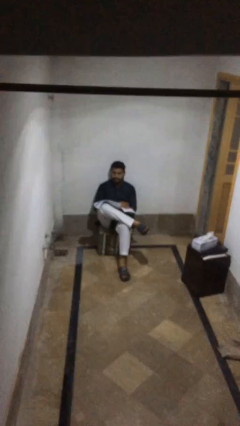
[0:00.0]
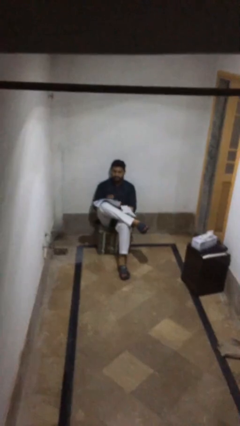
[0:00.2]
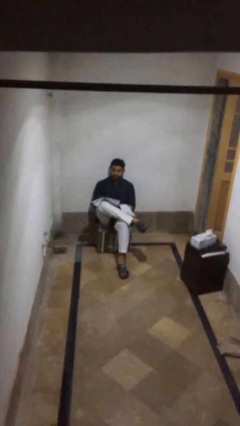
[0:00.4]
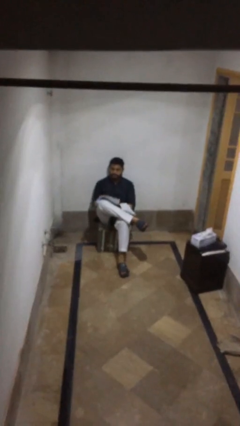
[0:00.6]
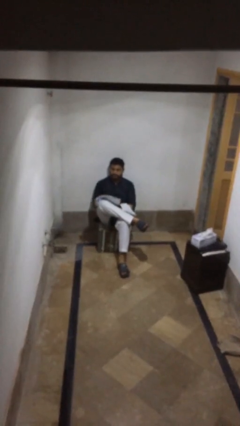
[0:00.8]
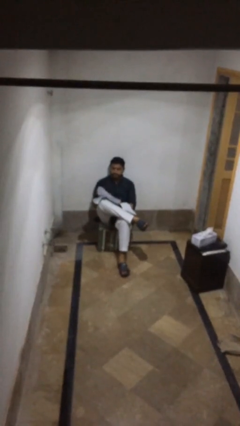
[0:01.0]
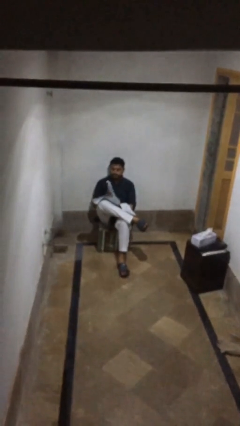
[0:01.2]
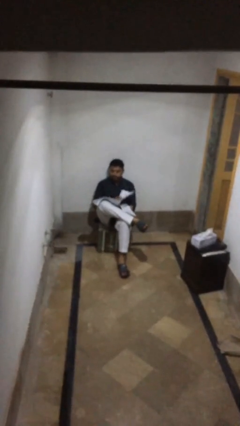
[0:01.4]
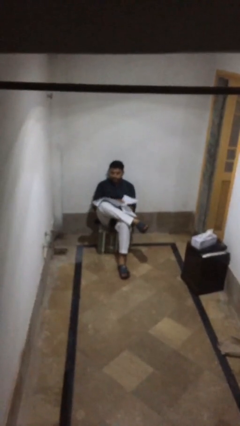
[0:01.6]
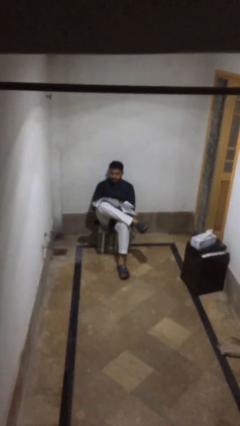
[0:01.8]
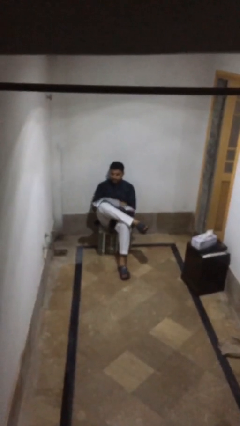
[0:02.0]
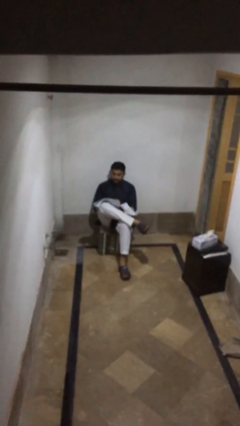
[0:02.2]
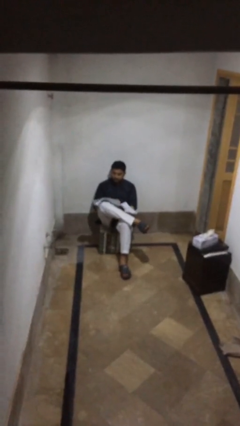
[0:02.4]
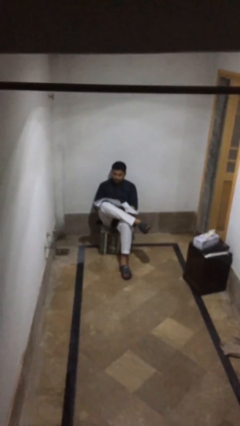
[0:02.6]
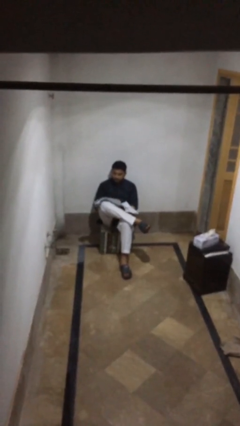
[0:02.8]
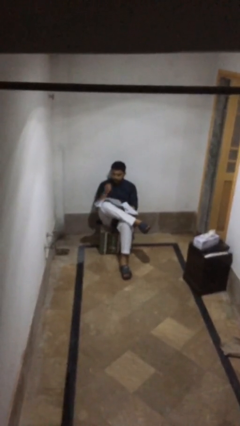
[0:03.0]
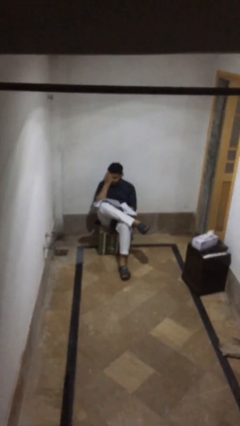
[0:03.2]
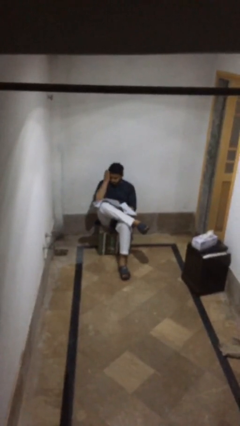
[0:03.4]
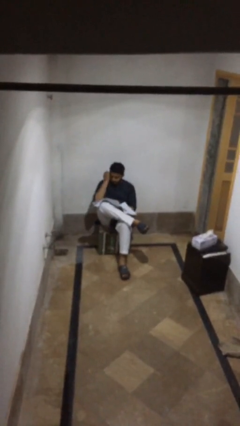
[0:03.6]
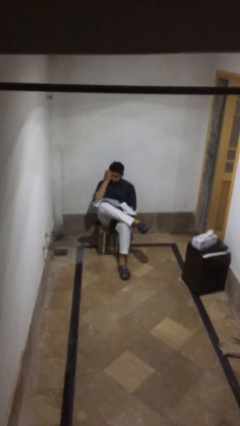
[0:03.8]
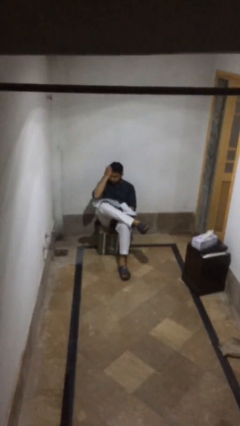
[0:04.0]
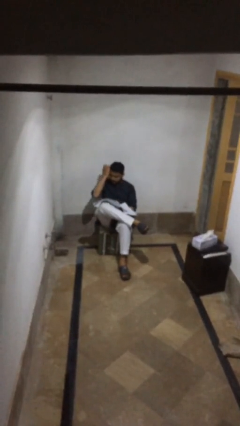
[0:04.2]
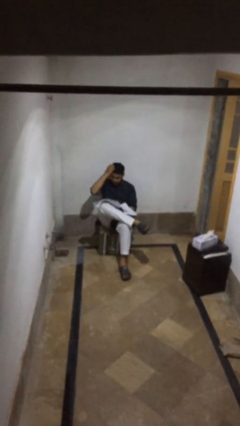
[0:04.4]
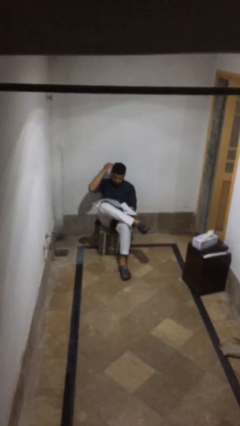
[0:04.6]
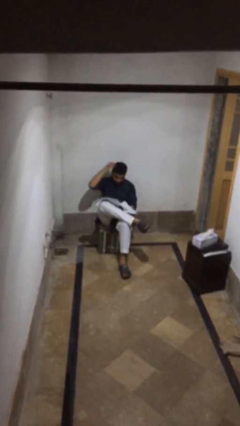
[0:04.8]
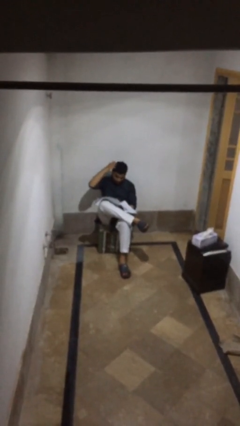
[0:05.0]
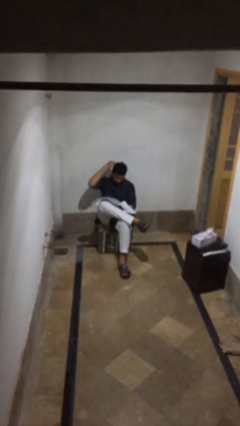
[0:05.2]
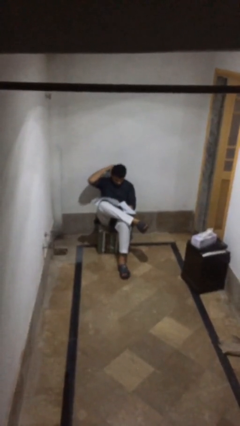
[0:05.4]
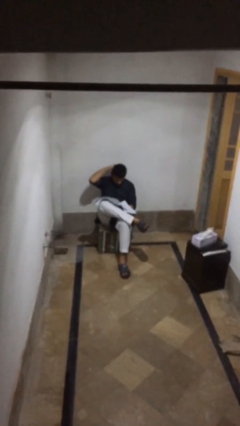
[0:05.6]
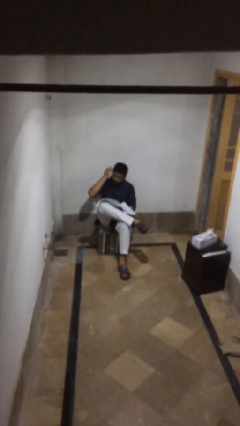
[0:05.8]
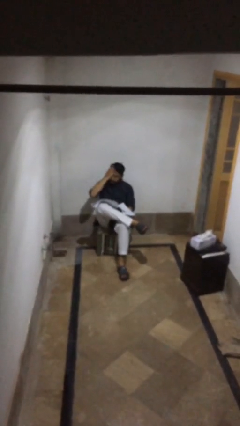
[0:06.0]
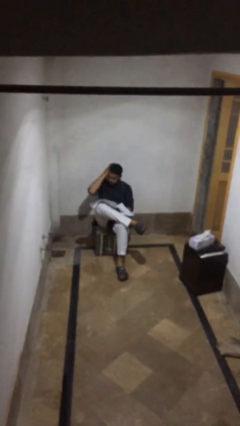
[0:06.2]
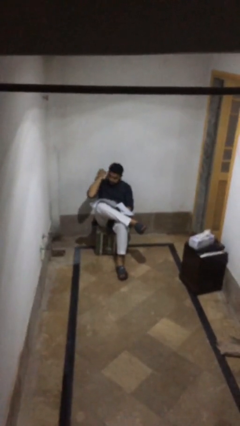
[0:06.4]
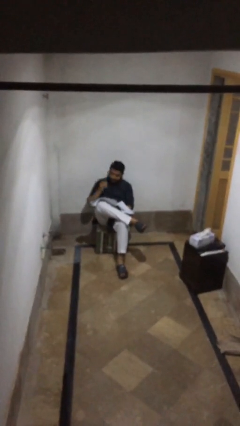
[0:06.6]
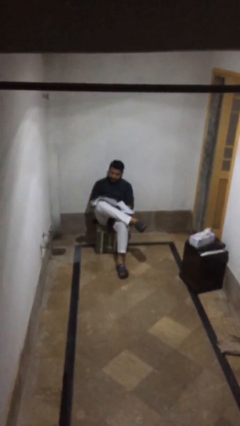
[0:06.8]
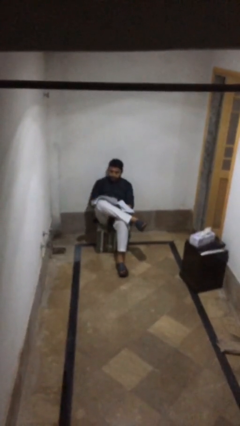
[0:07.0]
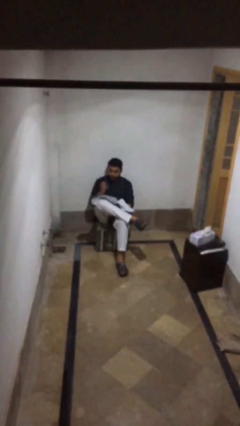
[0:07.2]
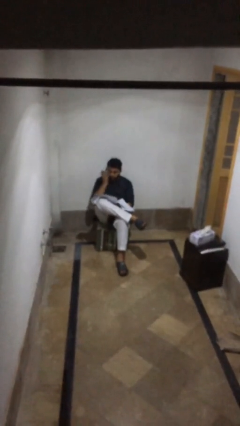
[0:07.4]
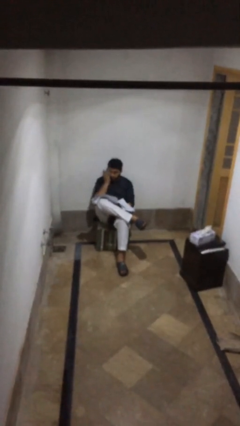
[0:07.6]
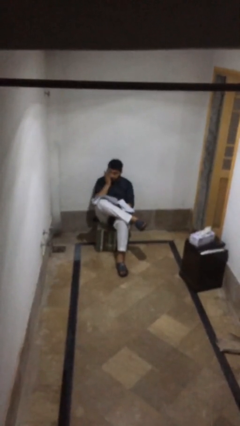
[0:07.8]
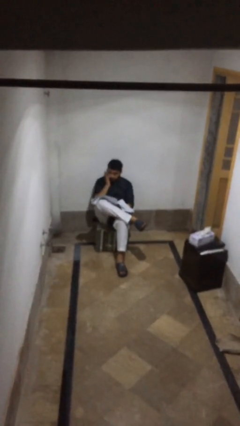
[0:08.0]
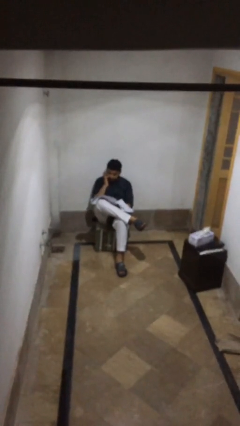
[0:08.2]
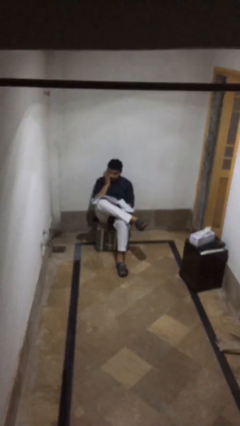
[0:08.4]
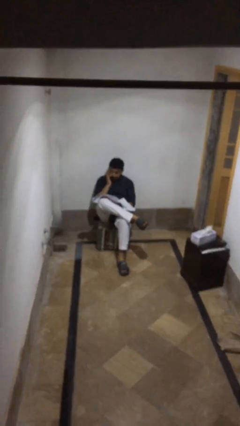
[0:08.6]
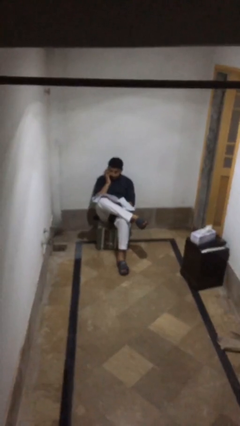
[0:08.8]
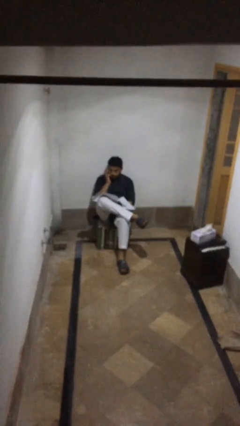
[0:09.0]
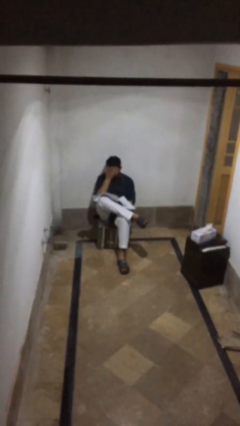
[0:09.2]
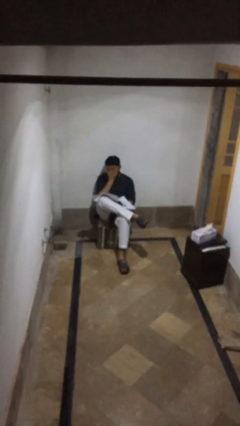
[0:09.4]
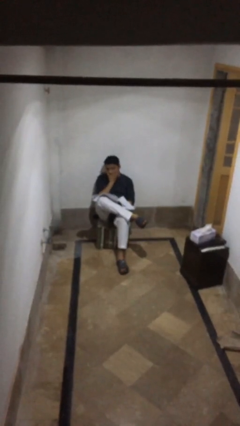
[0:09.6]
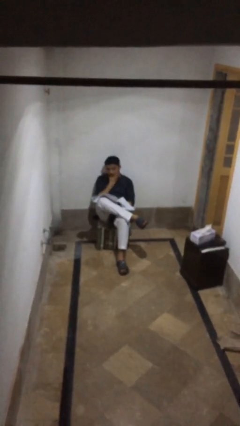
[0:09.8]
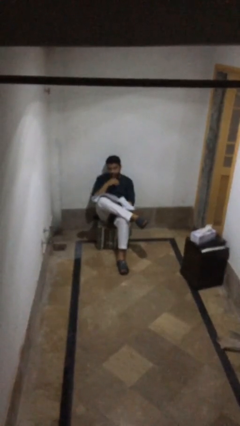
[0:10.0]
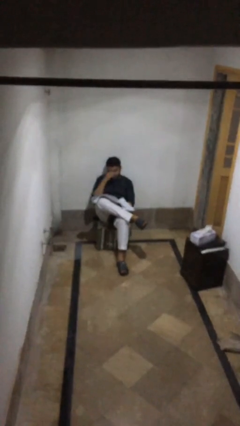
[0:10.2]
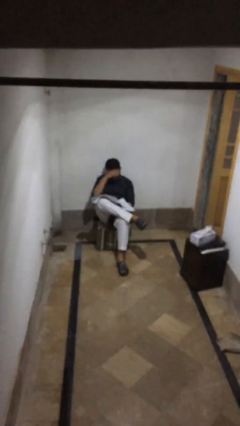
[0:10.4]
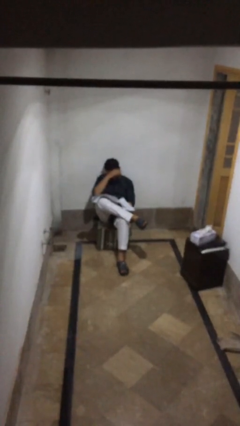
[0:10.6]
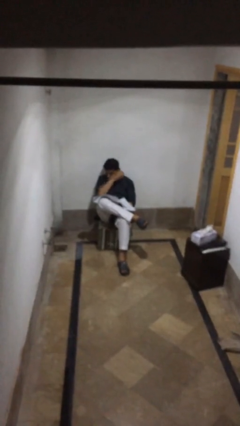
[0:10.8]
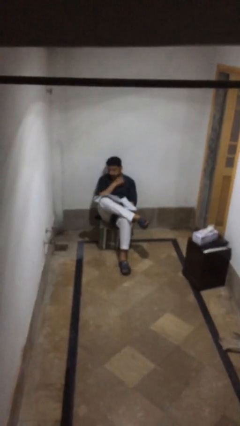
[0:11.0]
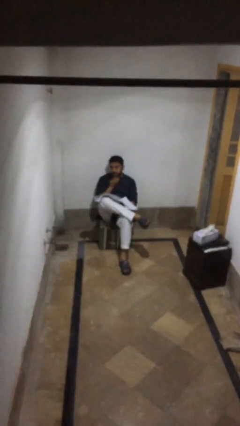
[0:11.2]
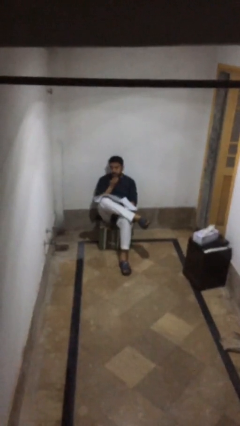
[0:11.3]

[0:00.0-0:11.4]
person reads document

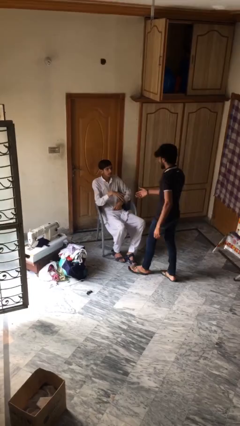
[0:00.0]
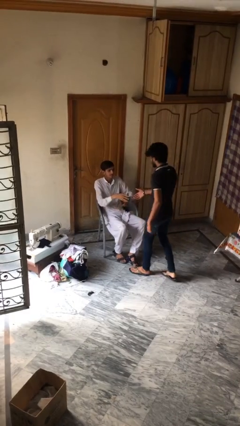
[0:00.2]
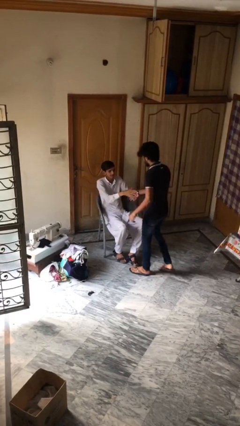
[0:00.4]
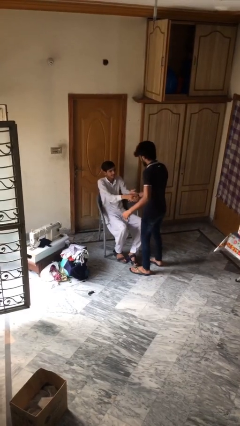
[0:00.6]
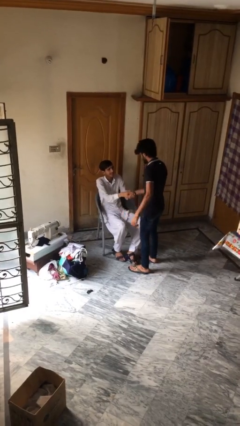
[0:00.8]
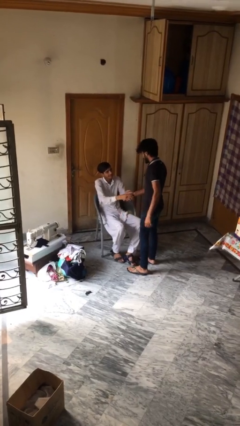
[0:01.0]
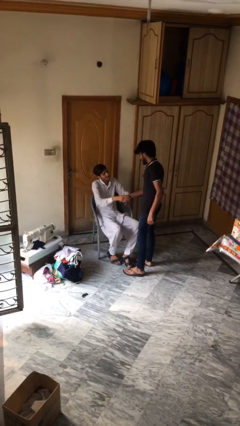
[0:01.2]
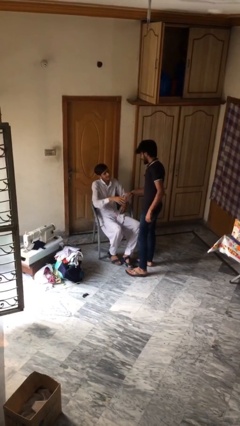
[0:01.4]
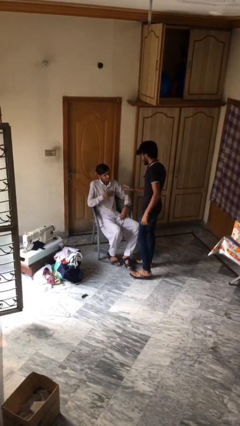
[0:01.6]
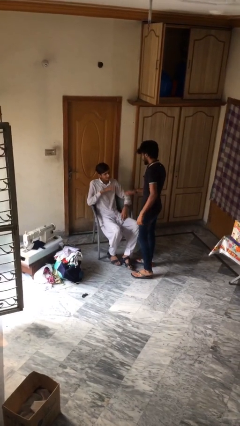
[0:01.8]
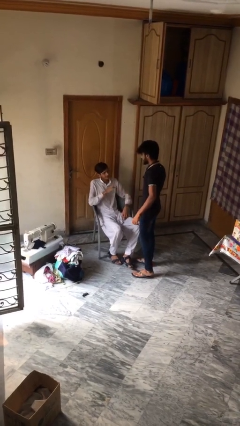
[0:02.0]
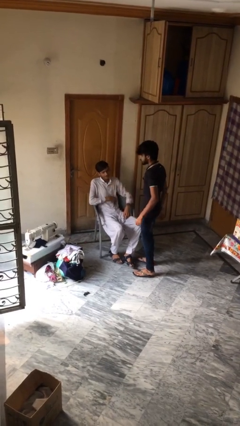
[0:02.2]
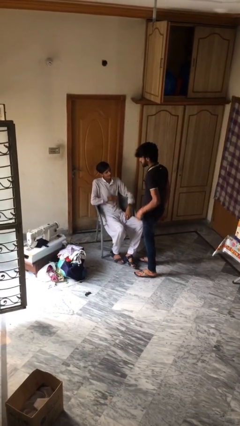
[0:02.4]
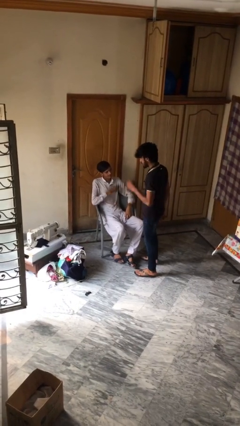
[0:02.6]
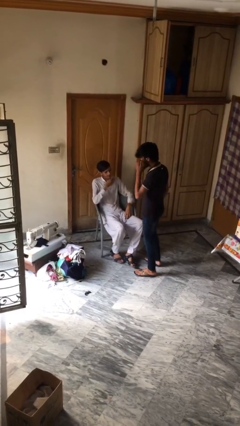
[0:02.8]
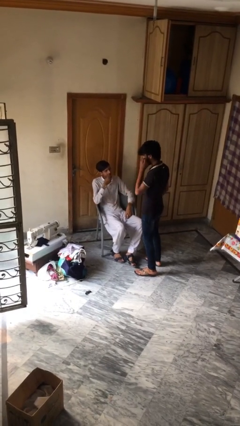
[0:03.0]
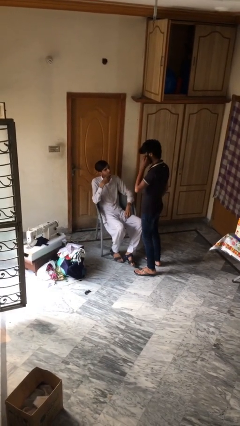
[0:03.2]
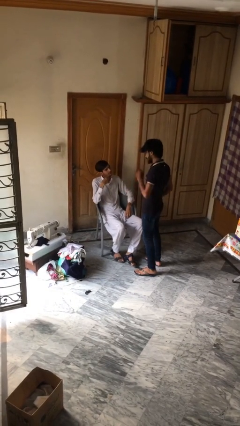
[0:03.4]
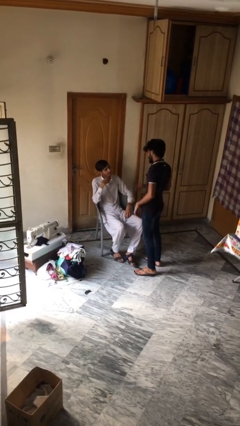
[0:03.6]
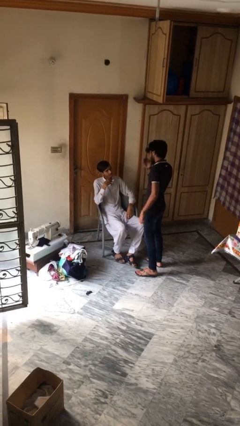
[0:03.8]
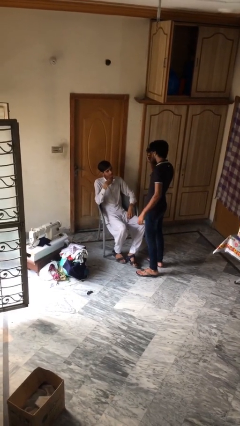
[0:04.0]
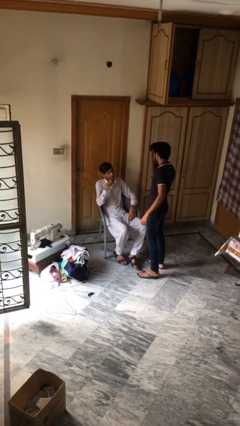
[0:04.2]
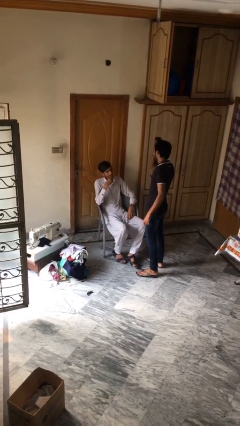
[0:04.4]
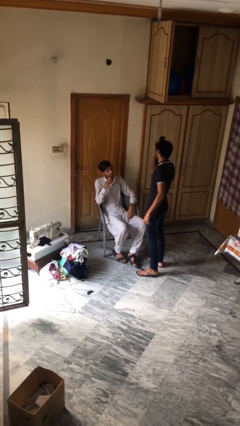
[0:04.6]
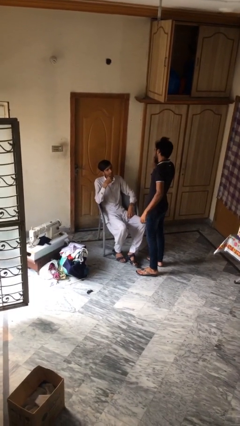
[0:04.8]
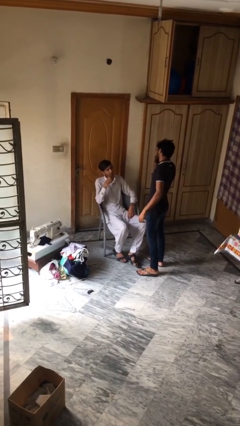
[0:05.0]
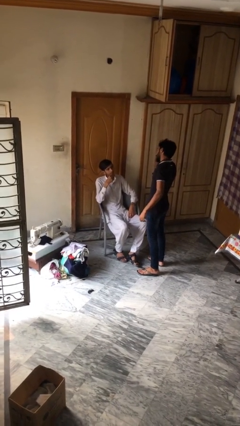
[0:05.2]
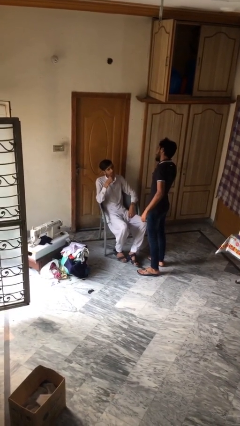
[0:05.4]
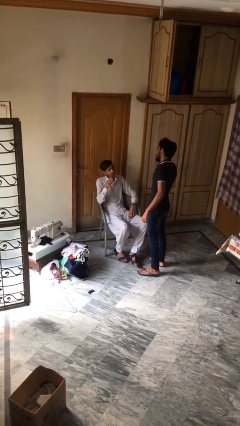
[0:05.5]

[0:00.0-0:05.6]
person shakes hand

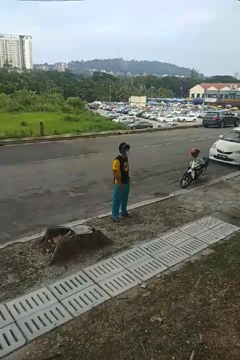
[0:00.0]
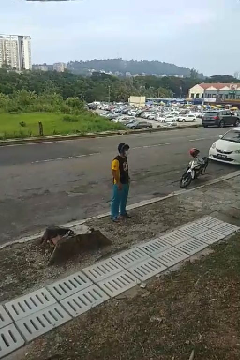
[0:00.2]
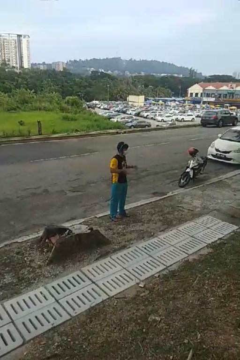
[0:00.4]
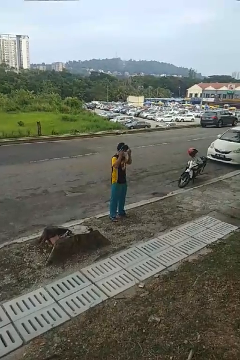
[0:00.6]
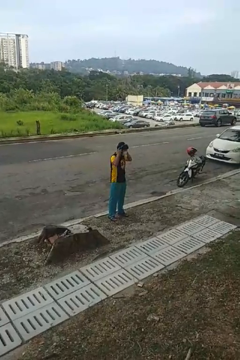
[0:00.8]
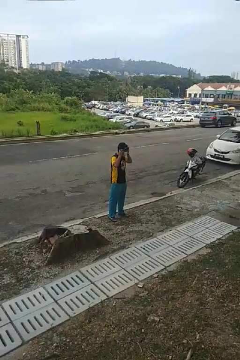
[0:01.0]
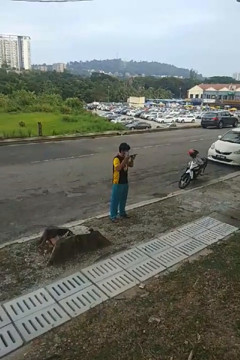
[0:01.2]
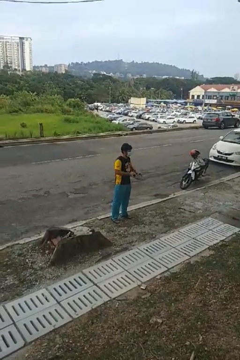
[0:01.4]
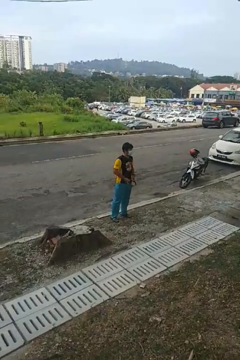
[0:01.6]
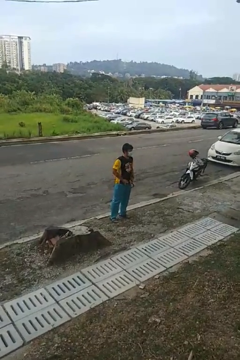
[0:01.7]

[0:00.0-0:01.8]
person takes off headphones
